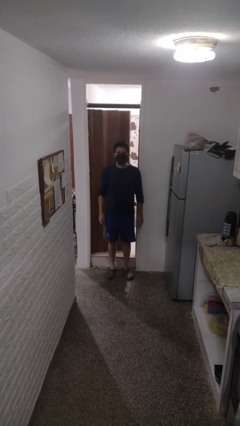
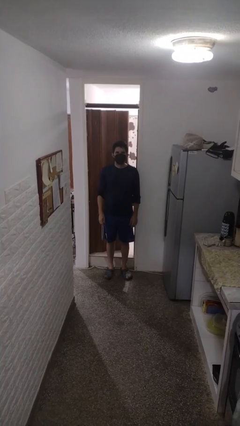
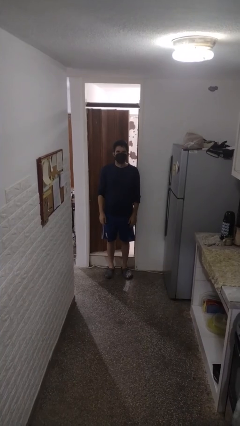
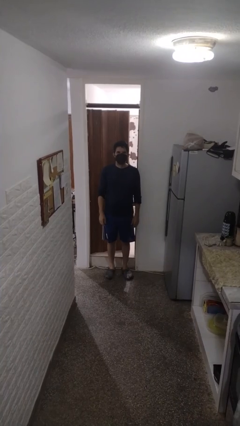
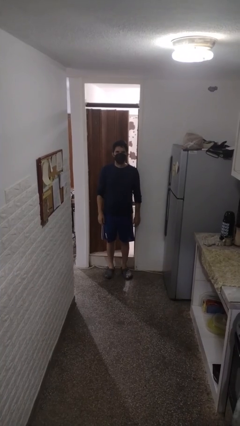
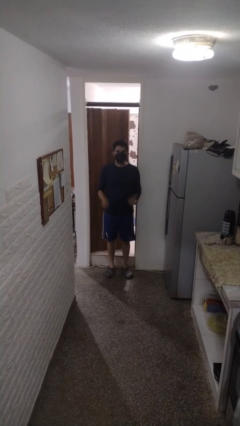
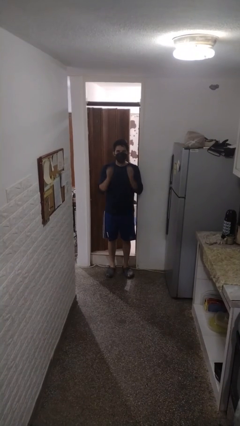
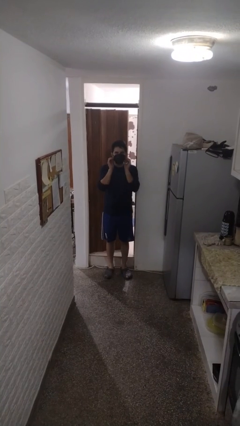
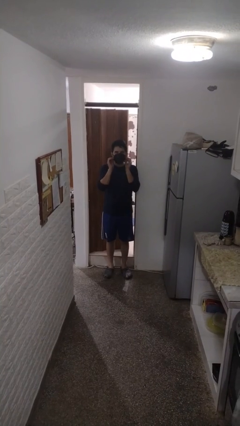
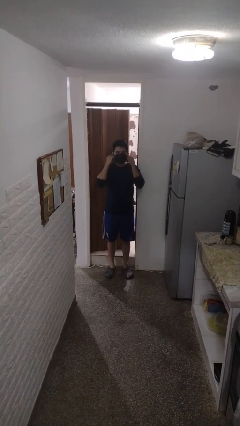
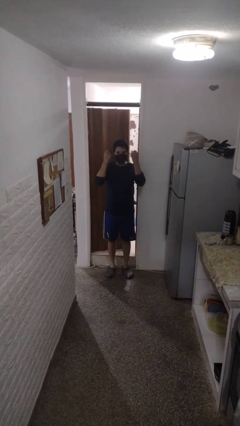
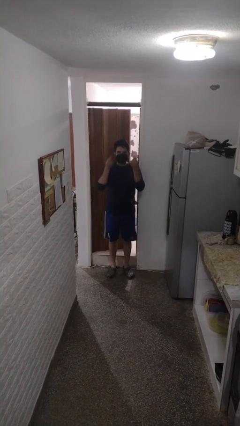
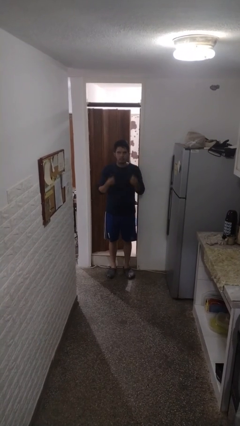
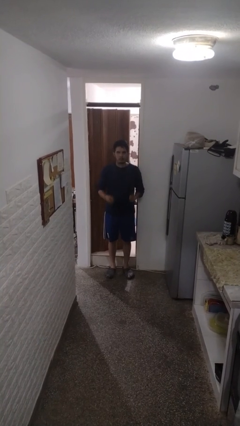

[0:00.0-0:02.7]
person takes off facemask

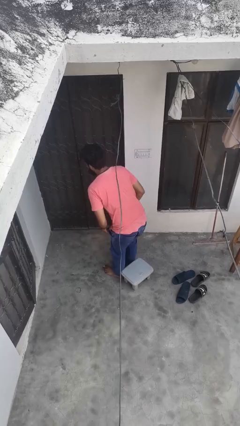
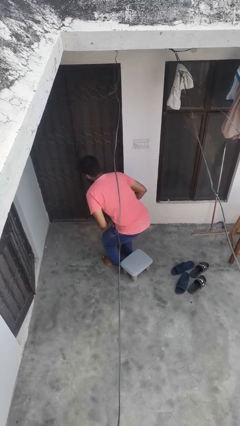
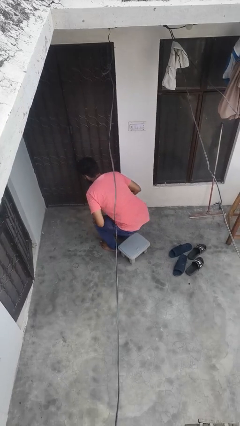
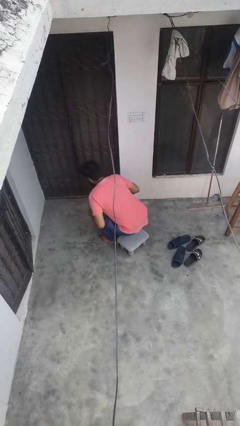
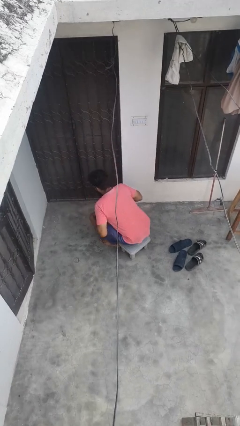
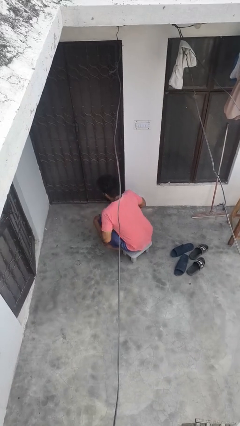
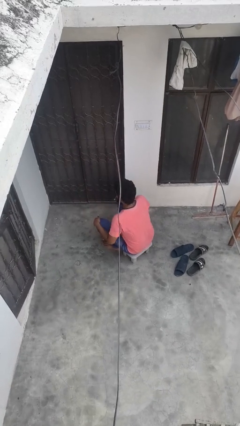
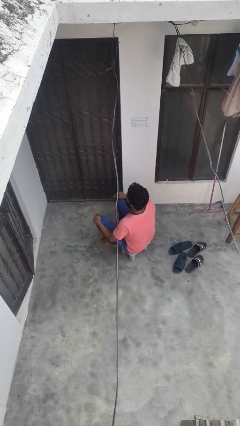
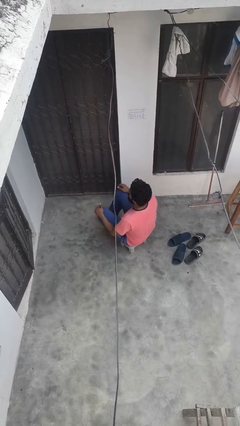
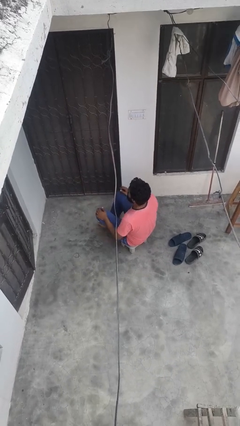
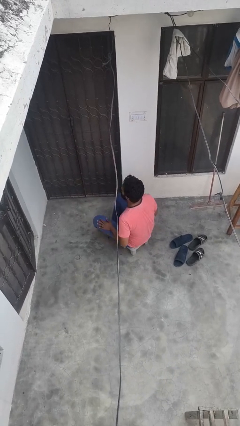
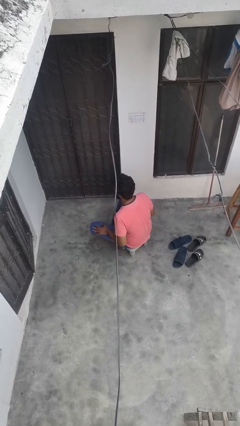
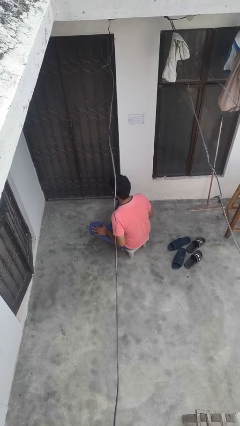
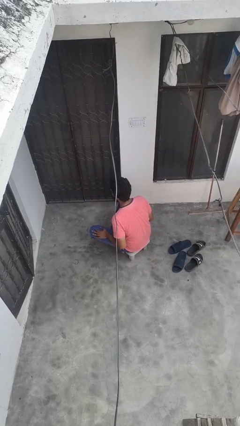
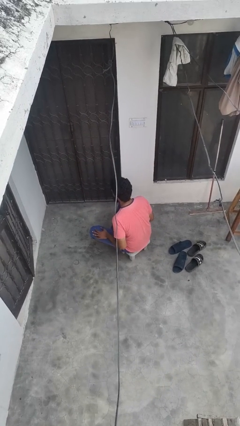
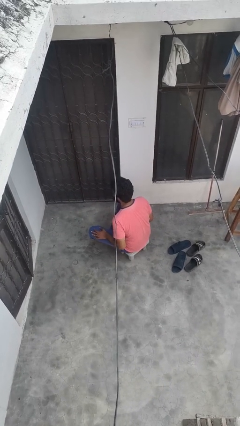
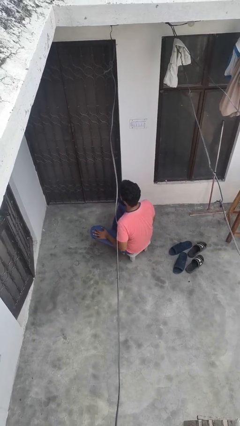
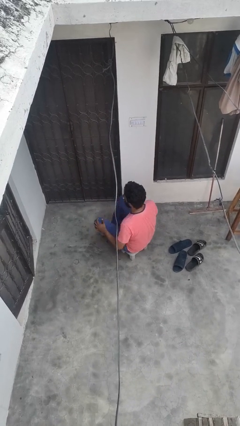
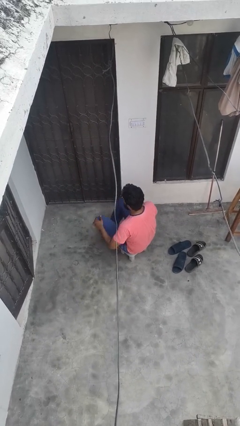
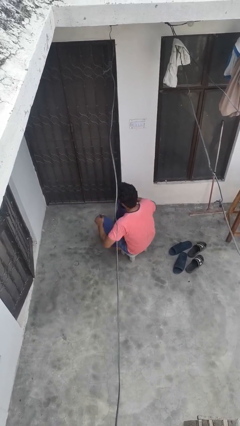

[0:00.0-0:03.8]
person sits crisscross

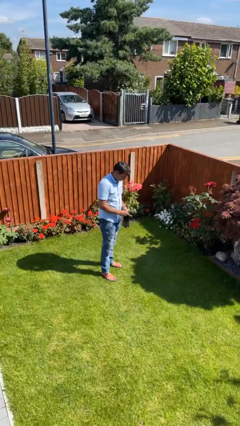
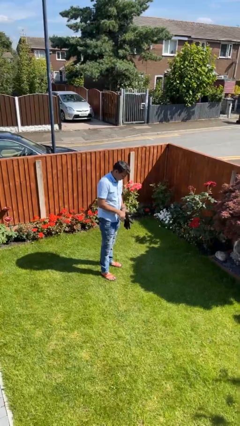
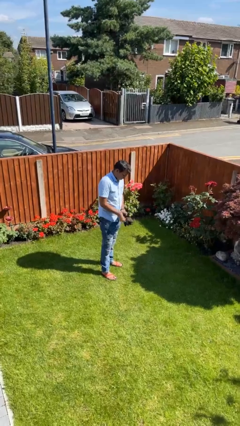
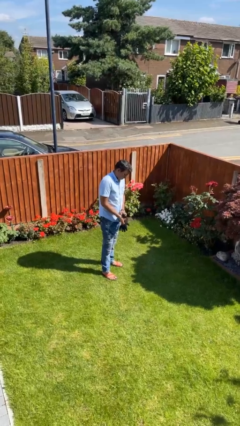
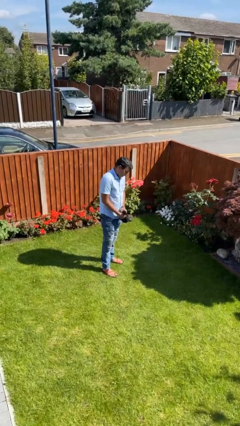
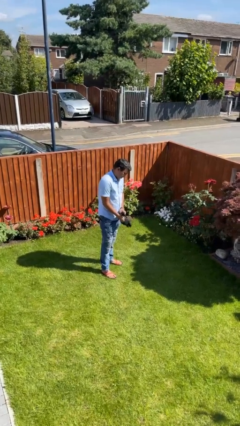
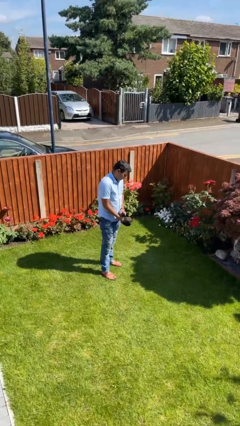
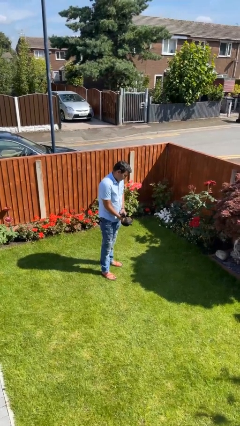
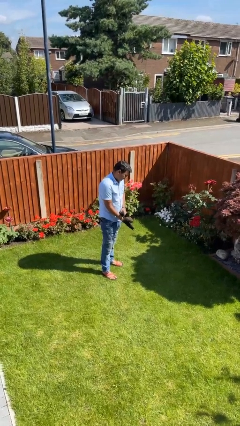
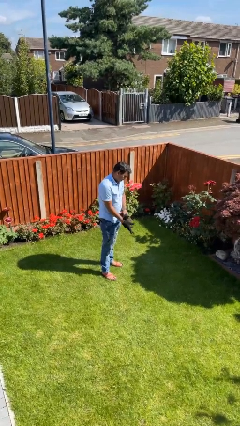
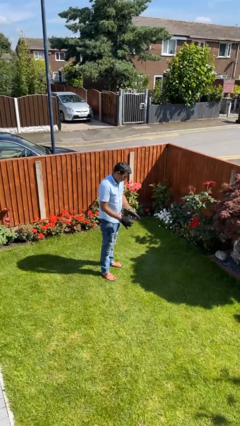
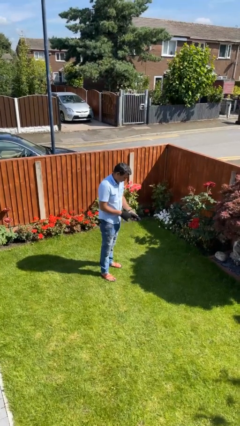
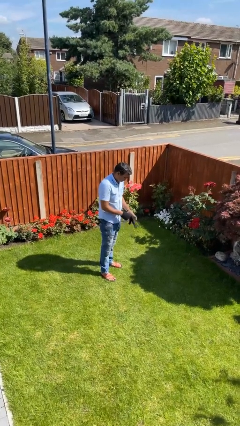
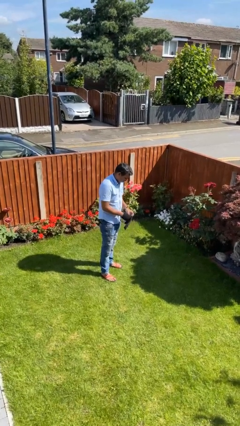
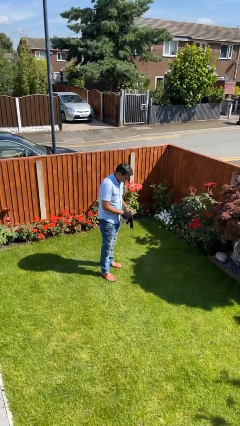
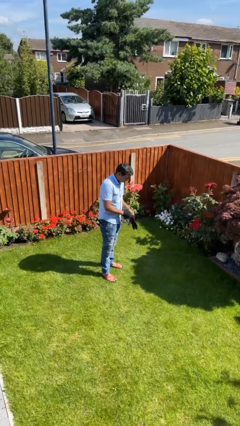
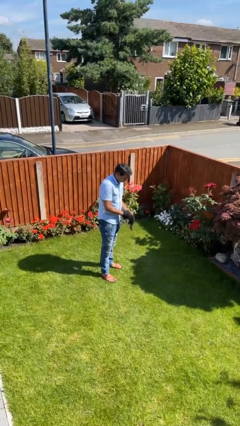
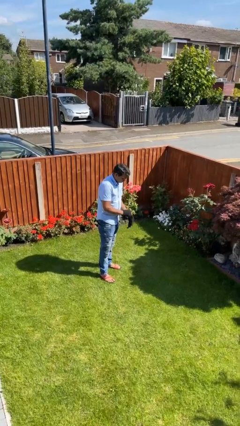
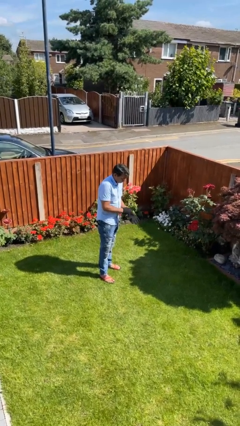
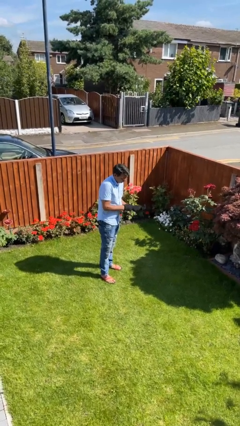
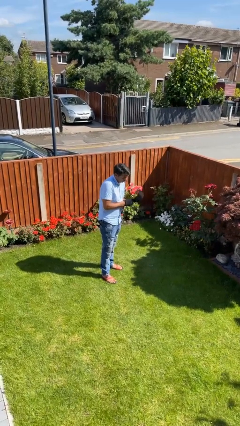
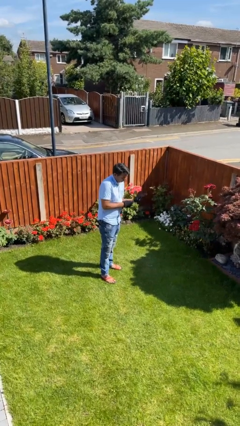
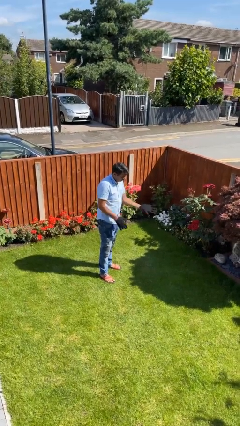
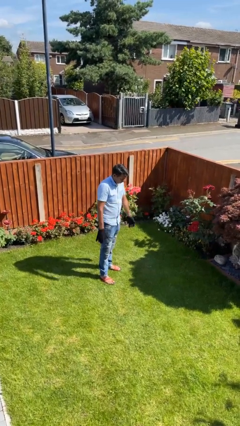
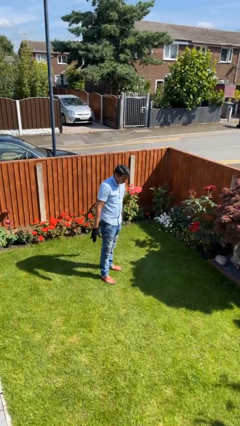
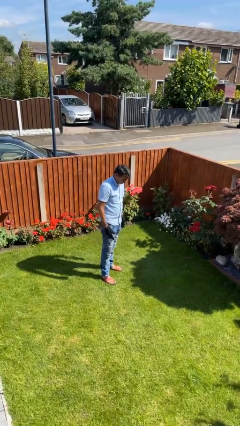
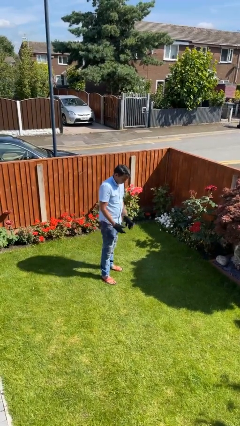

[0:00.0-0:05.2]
person puts on gloves

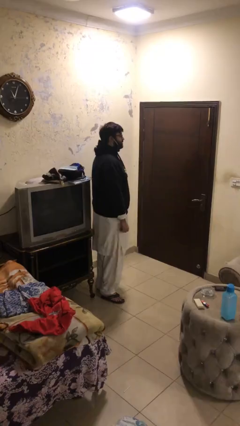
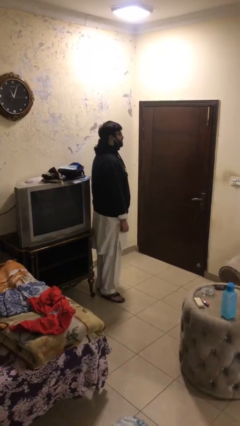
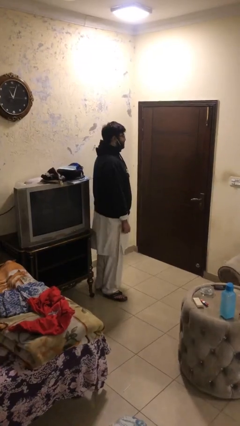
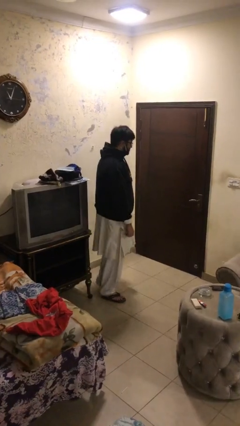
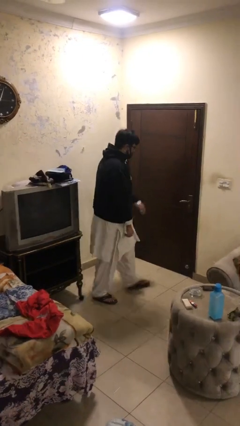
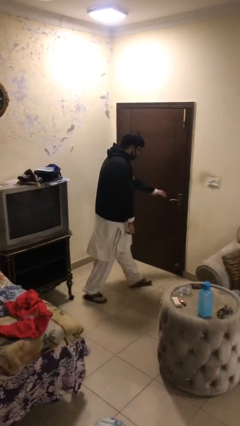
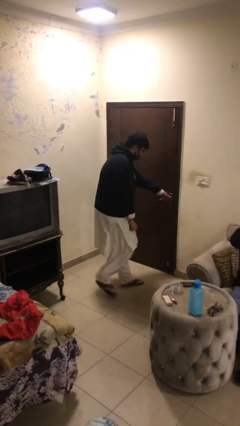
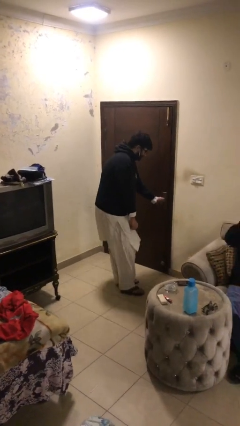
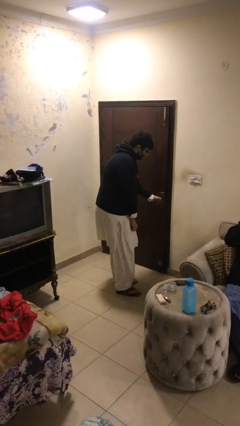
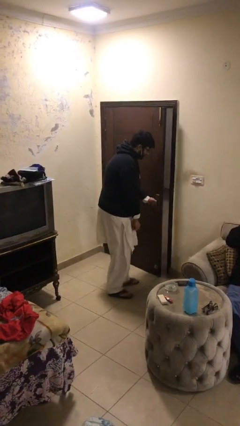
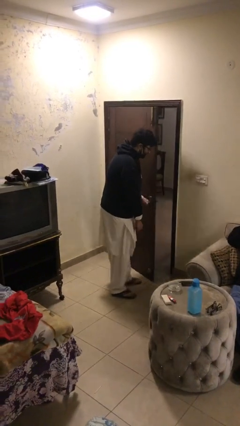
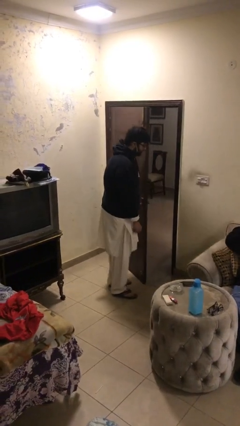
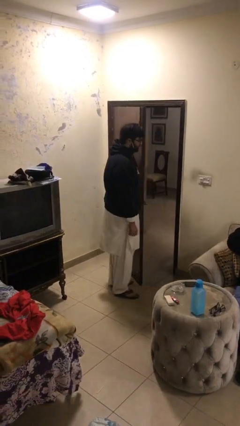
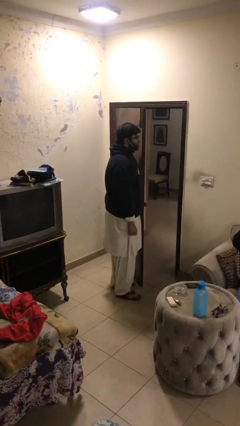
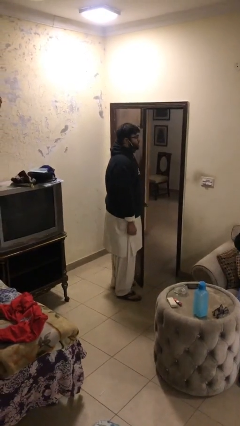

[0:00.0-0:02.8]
person opens facility door

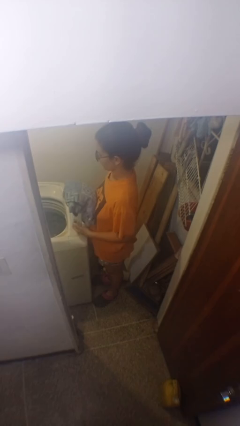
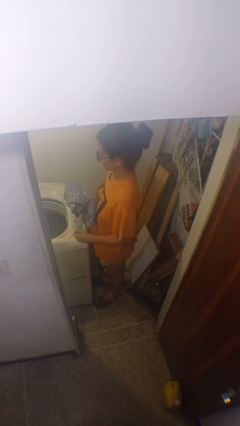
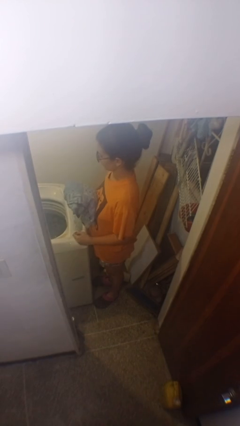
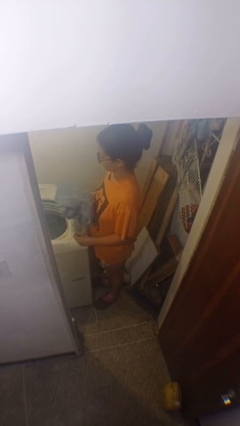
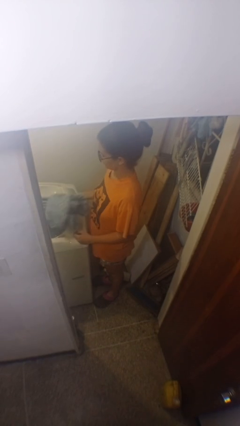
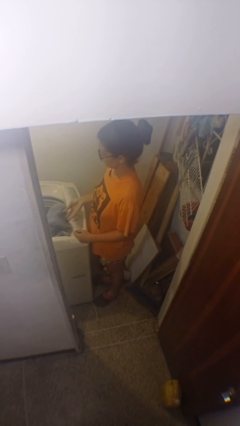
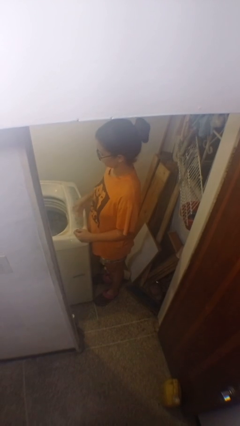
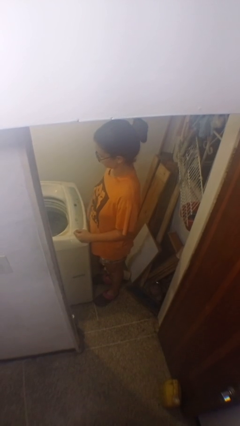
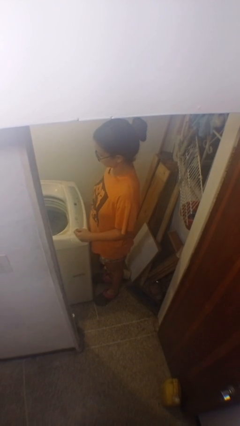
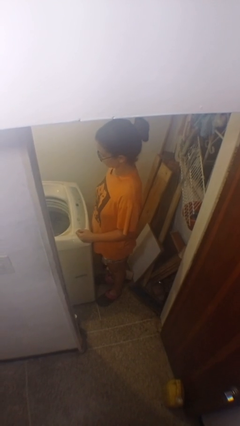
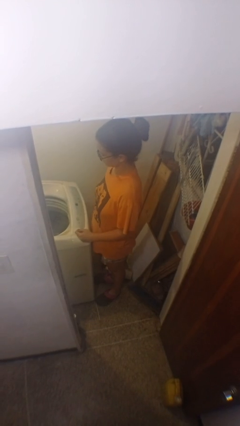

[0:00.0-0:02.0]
person loads clotheswasher

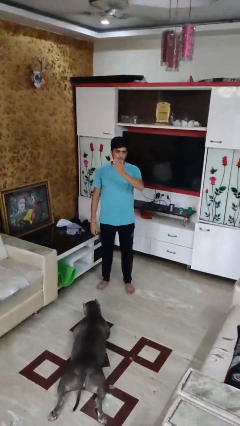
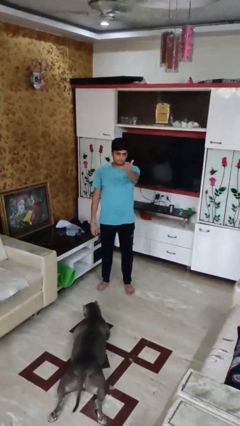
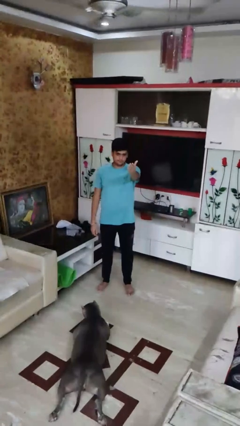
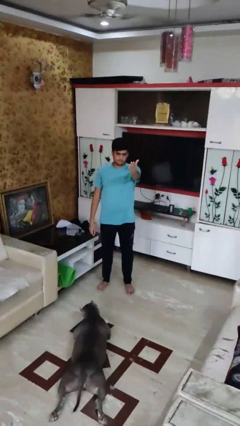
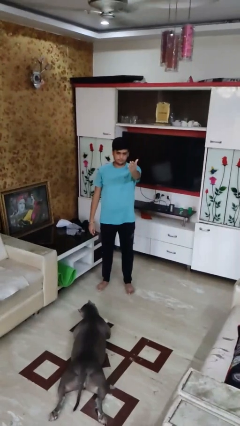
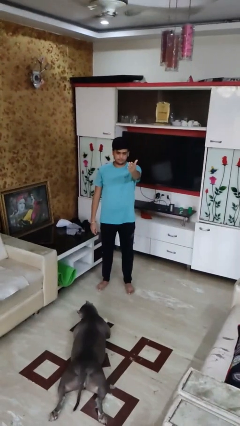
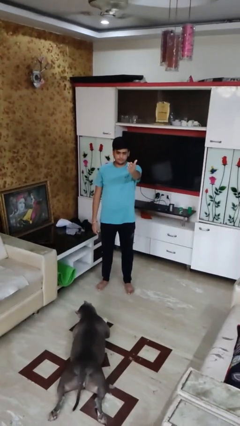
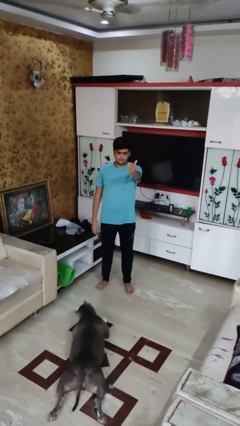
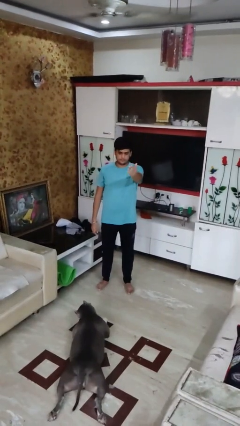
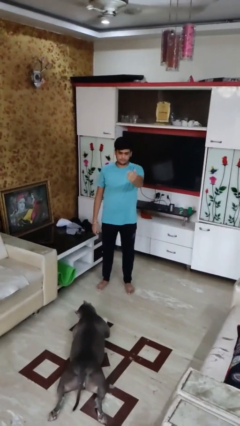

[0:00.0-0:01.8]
person gestures blow kiss
